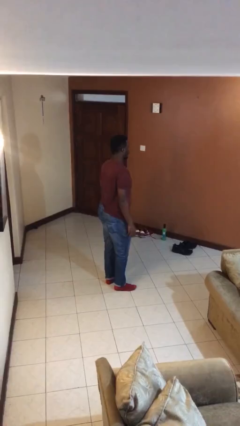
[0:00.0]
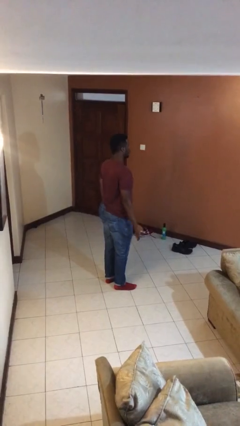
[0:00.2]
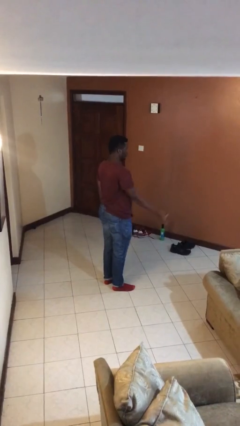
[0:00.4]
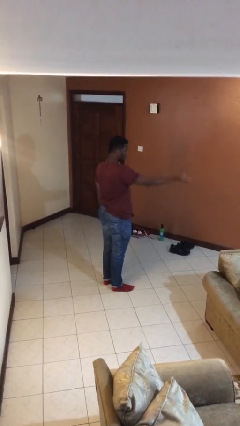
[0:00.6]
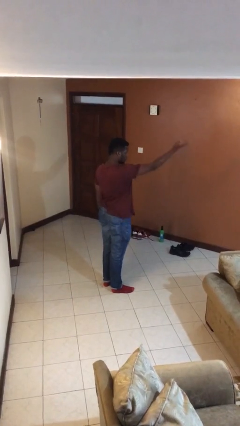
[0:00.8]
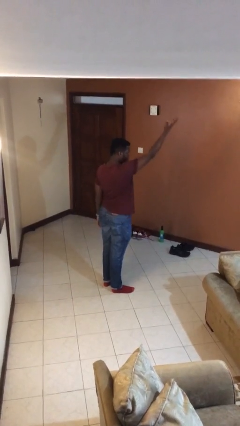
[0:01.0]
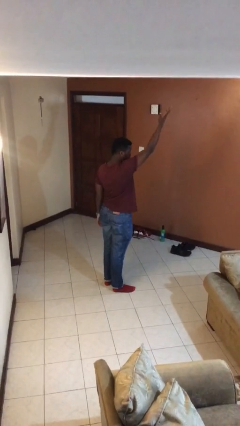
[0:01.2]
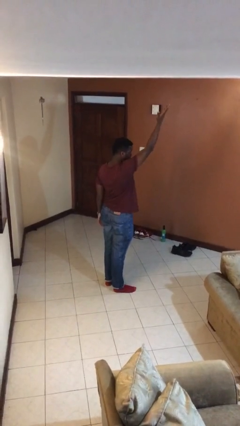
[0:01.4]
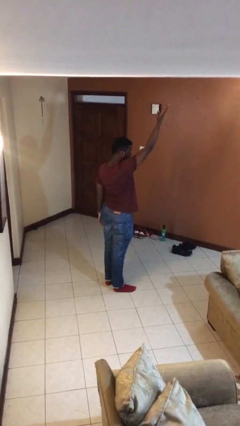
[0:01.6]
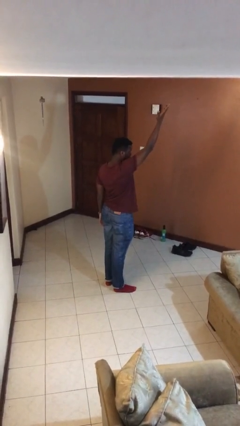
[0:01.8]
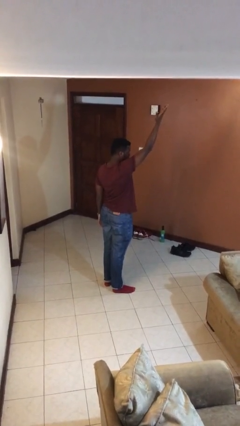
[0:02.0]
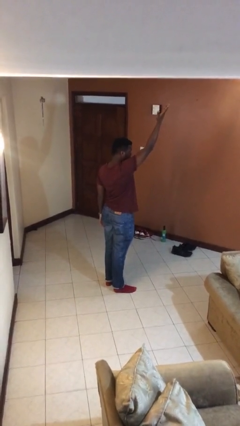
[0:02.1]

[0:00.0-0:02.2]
person gestures swipe up

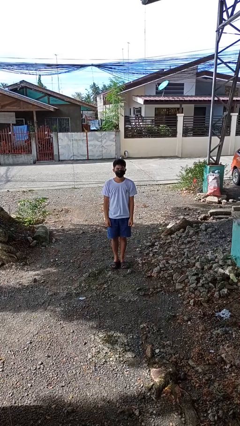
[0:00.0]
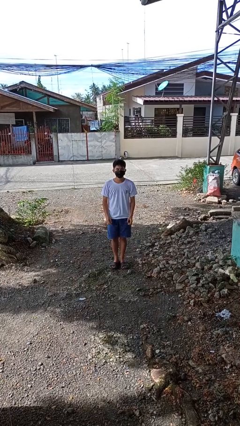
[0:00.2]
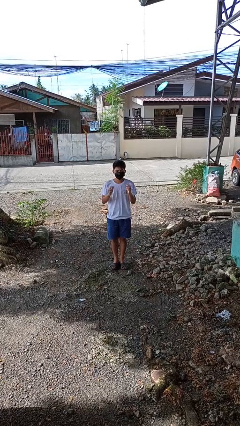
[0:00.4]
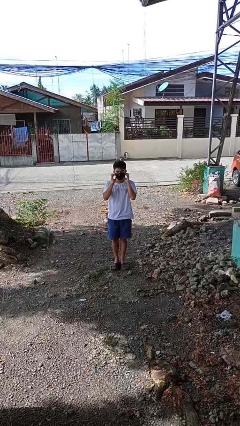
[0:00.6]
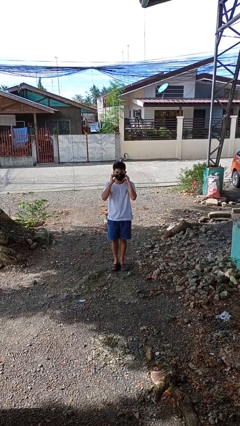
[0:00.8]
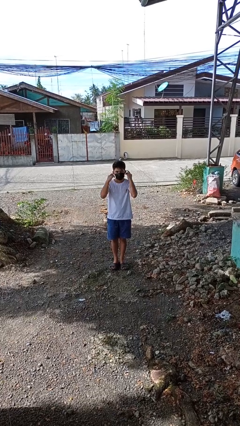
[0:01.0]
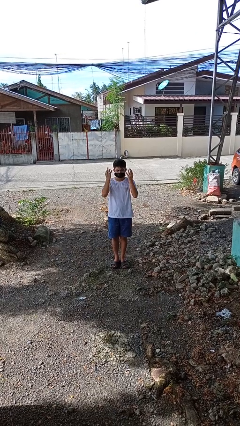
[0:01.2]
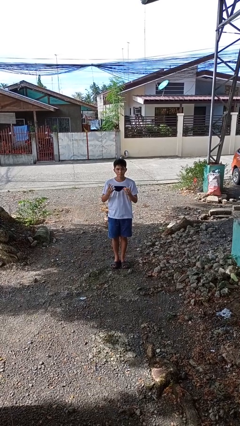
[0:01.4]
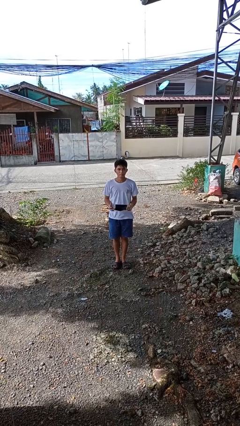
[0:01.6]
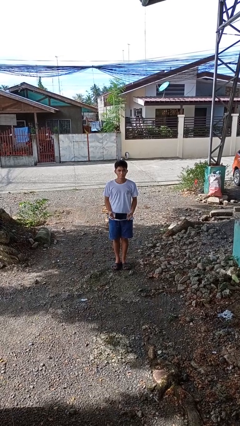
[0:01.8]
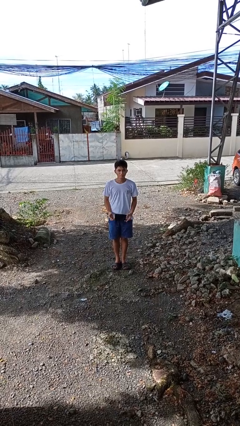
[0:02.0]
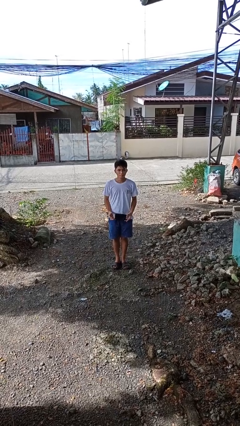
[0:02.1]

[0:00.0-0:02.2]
person takes off facemask

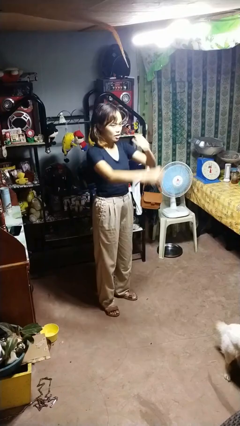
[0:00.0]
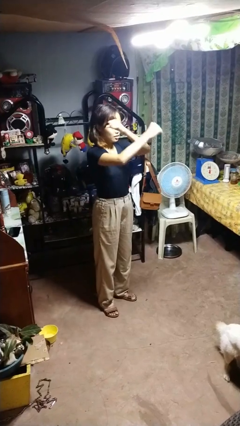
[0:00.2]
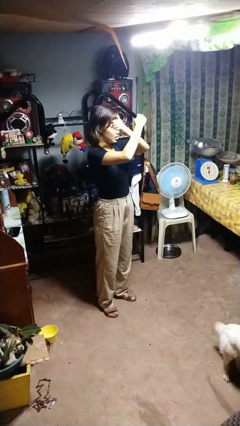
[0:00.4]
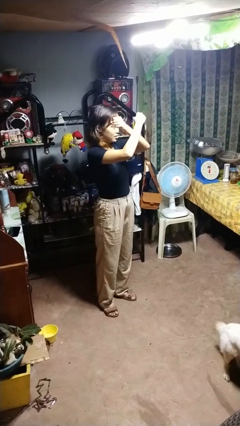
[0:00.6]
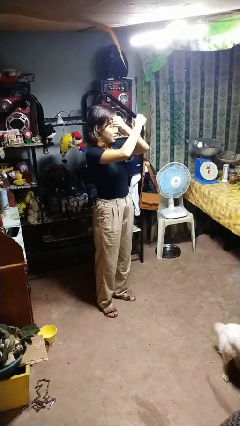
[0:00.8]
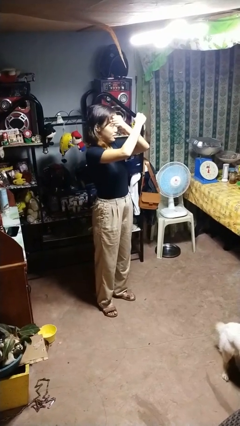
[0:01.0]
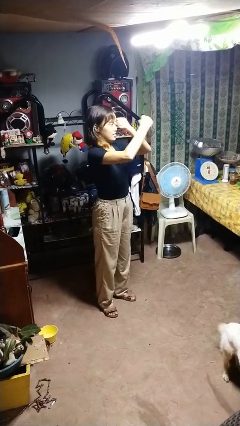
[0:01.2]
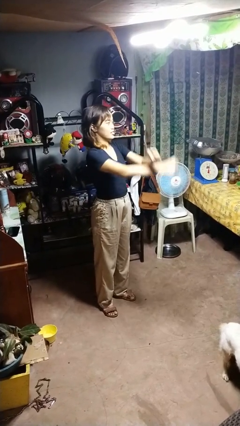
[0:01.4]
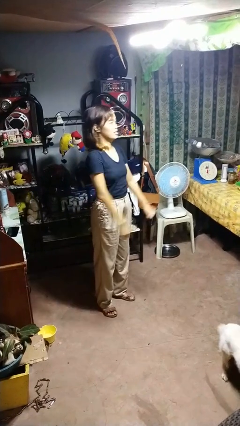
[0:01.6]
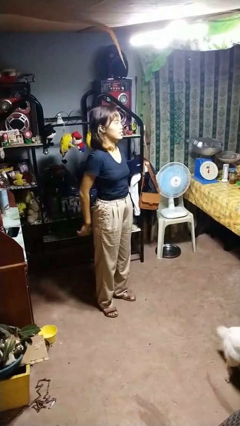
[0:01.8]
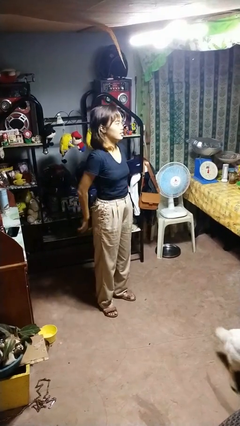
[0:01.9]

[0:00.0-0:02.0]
person gestures arms x

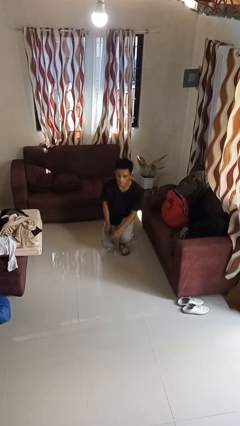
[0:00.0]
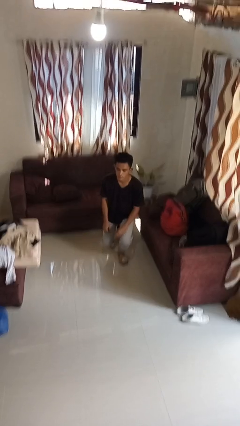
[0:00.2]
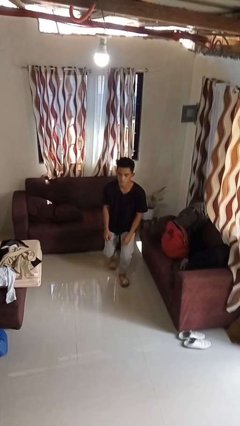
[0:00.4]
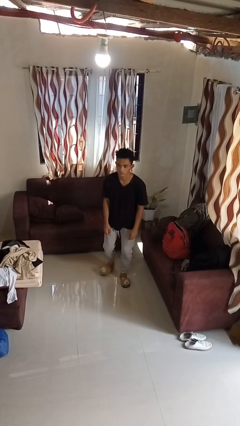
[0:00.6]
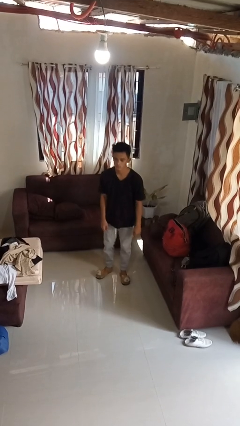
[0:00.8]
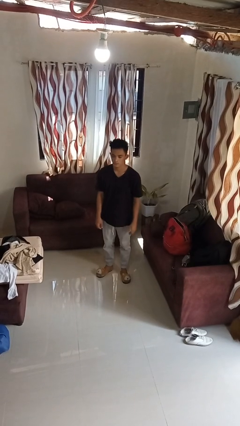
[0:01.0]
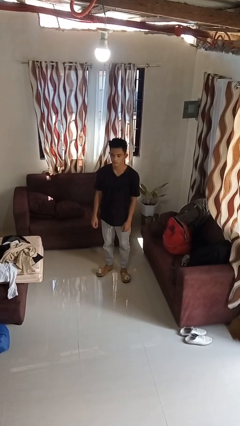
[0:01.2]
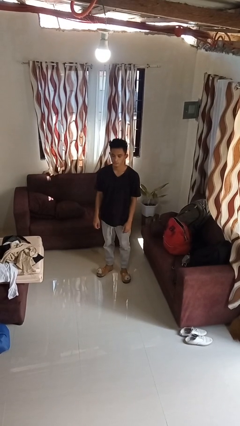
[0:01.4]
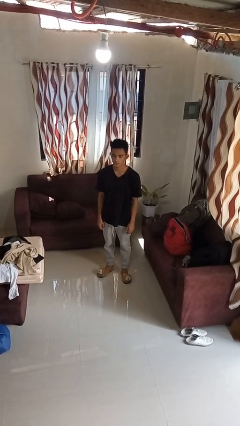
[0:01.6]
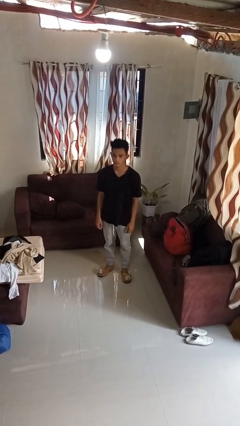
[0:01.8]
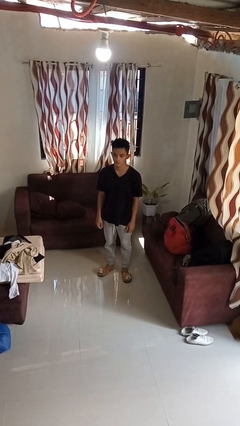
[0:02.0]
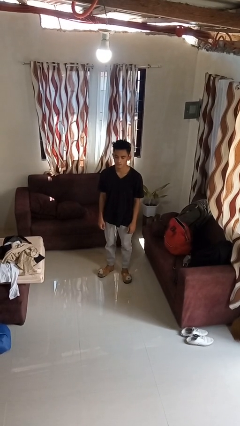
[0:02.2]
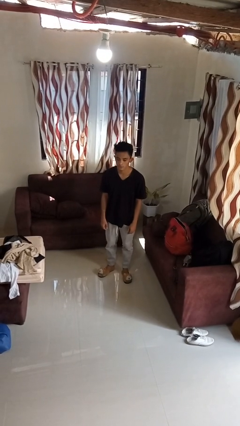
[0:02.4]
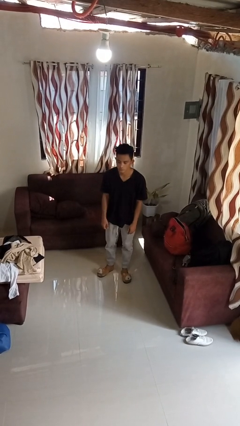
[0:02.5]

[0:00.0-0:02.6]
person stands up from floor

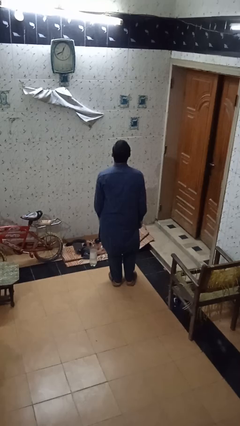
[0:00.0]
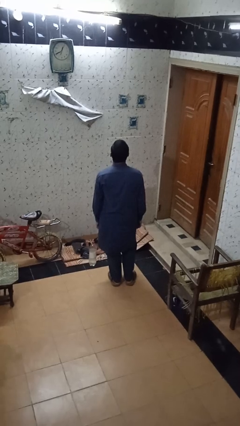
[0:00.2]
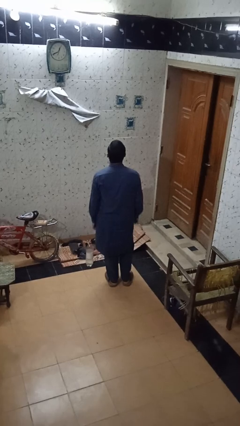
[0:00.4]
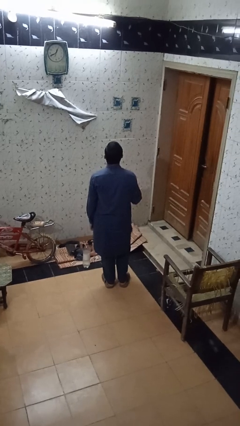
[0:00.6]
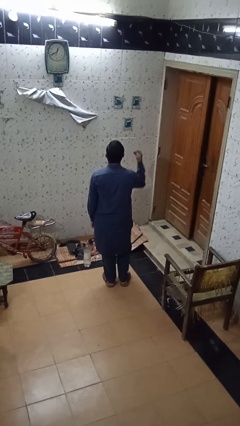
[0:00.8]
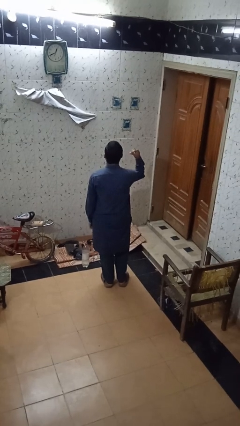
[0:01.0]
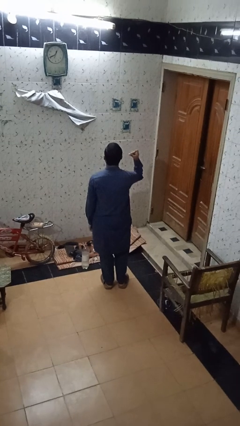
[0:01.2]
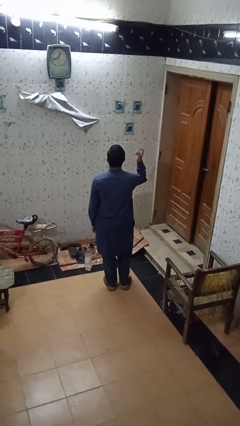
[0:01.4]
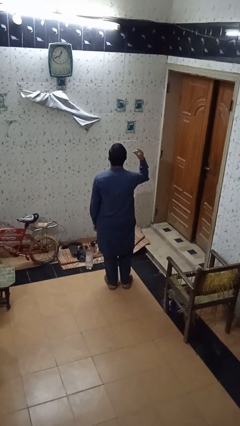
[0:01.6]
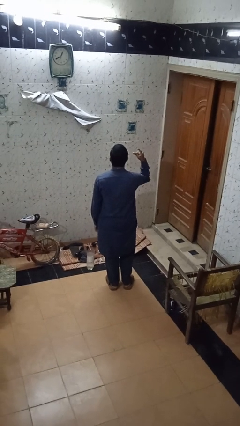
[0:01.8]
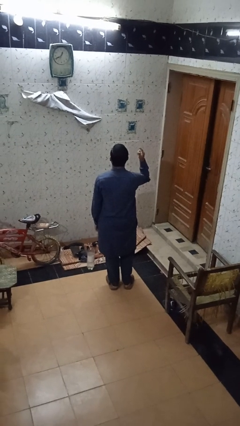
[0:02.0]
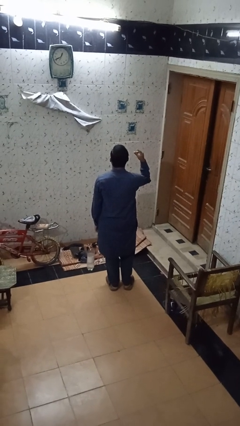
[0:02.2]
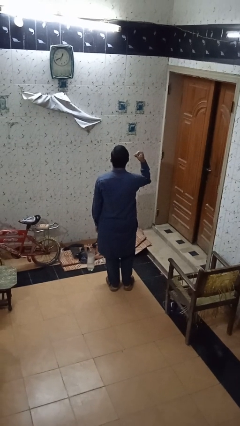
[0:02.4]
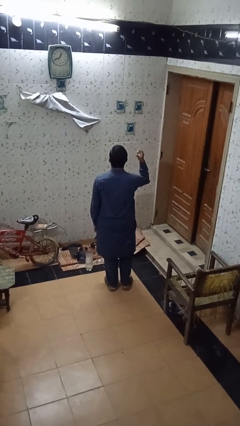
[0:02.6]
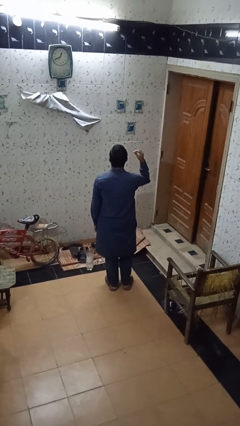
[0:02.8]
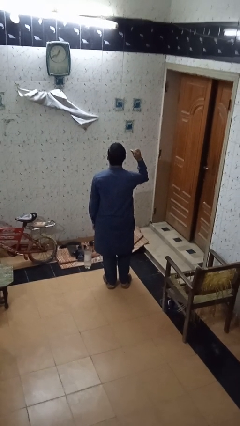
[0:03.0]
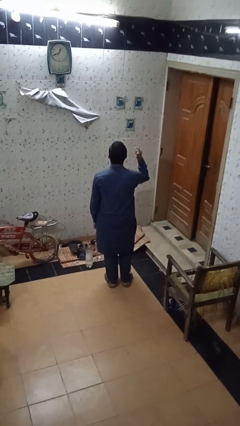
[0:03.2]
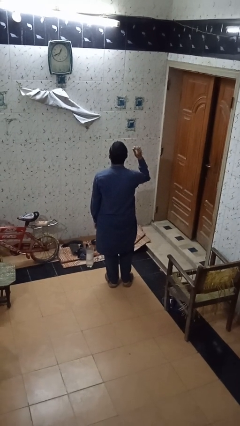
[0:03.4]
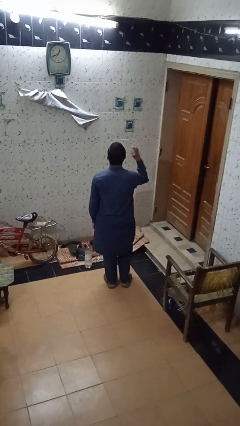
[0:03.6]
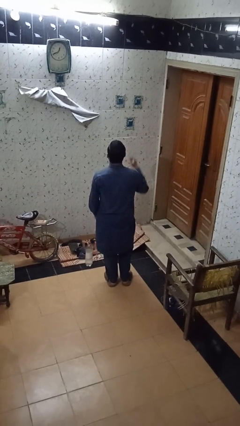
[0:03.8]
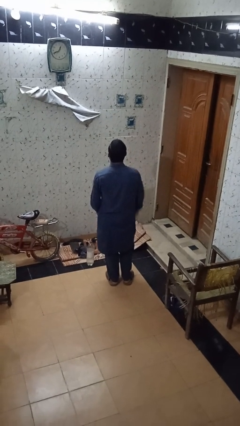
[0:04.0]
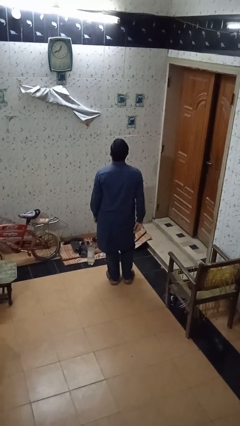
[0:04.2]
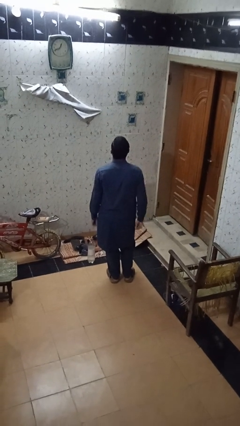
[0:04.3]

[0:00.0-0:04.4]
person snaps fingers

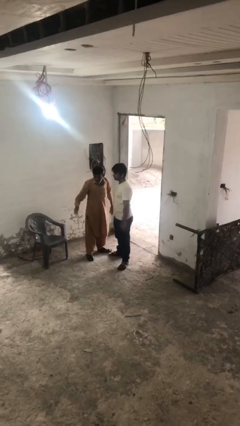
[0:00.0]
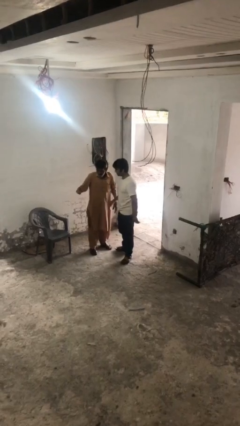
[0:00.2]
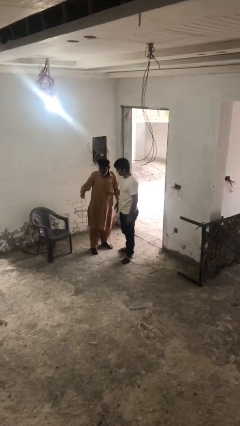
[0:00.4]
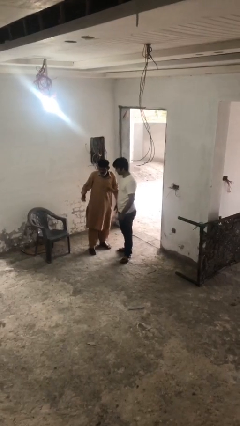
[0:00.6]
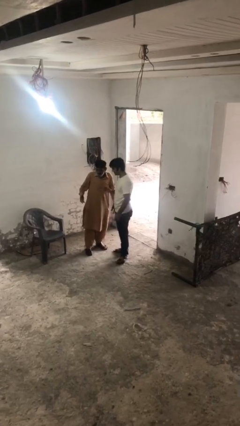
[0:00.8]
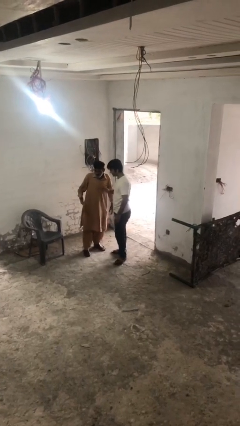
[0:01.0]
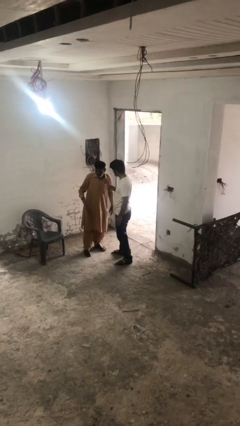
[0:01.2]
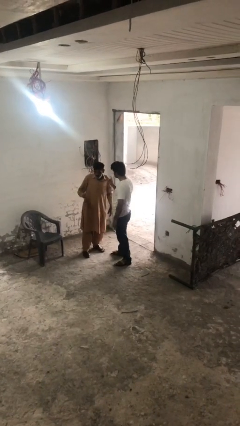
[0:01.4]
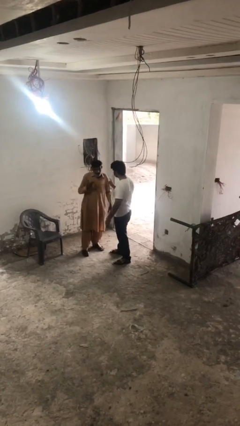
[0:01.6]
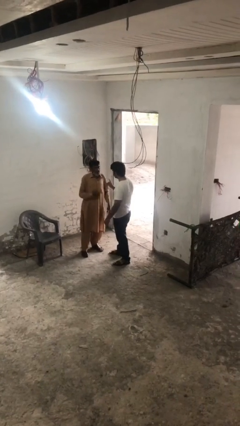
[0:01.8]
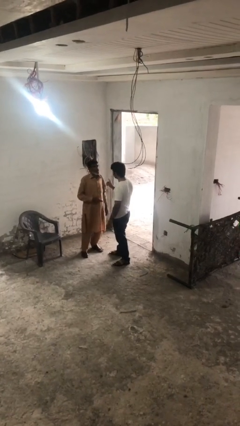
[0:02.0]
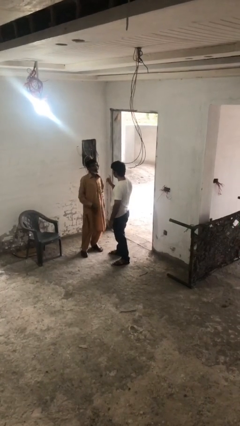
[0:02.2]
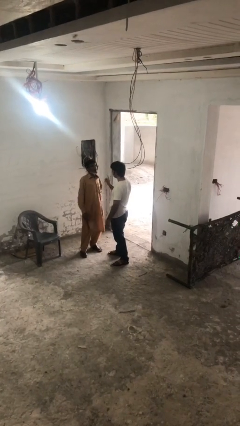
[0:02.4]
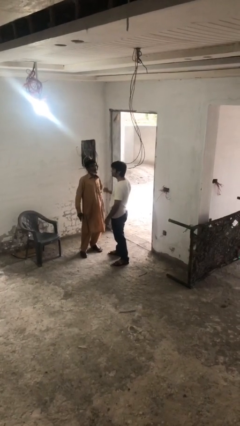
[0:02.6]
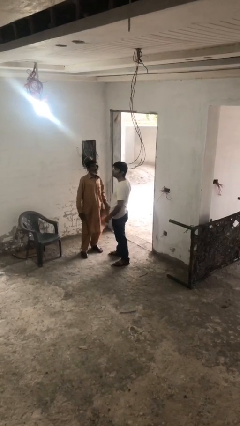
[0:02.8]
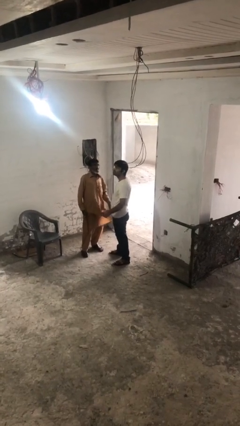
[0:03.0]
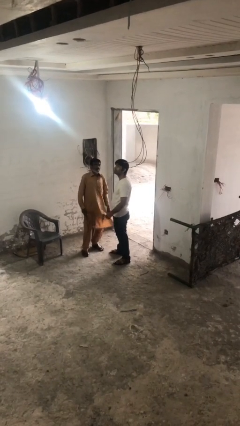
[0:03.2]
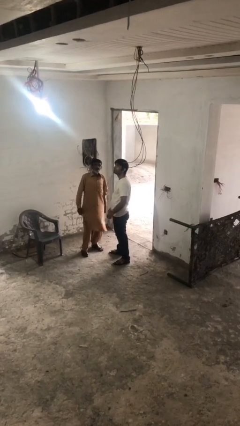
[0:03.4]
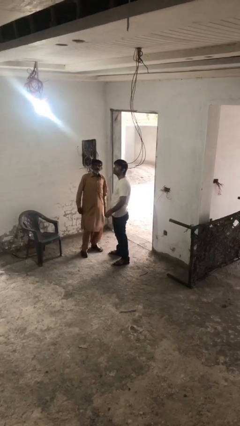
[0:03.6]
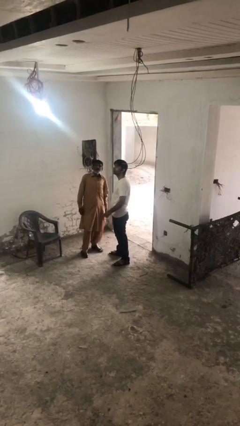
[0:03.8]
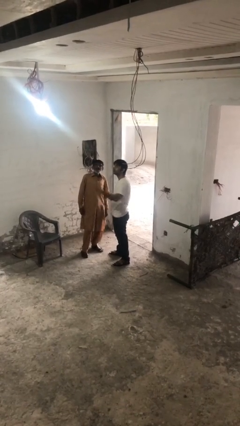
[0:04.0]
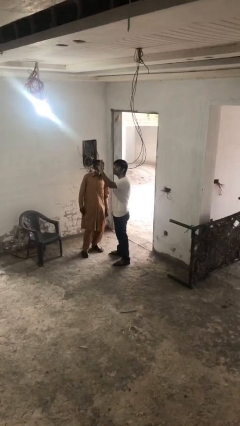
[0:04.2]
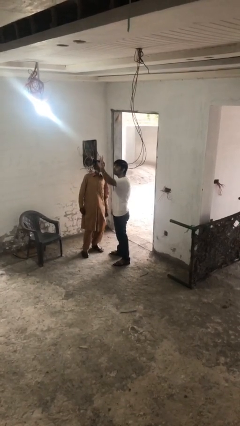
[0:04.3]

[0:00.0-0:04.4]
person talks to person
